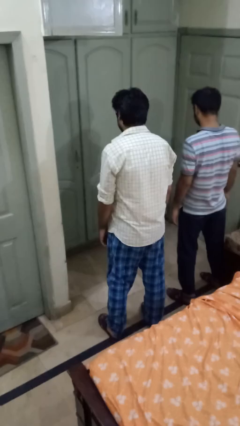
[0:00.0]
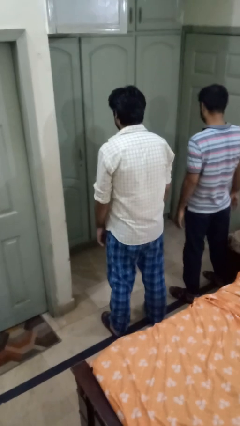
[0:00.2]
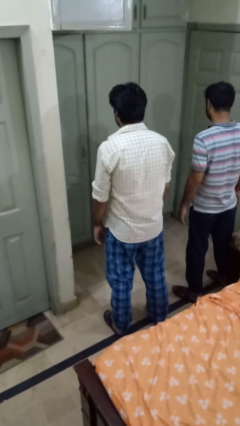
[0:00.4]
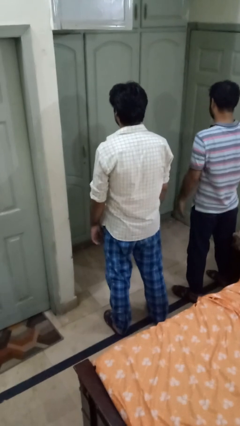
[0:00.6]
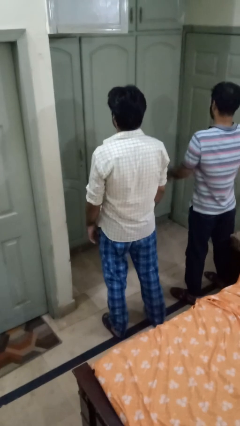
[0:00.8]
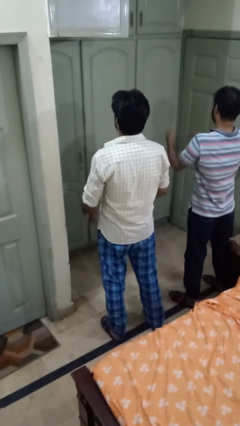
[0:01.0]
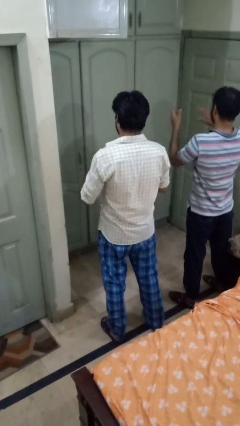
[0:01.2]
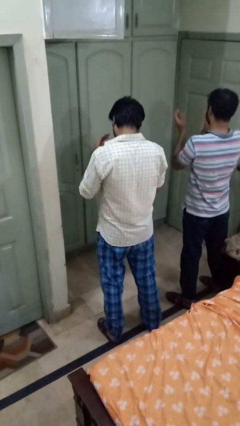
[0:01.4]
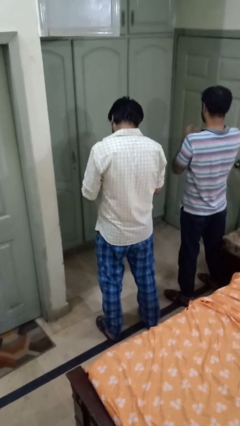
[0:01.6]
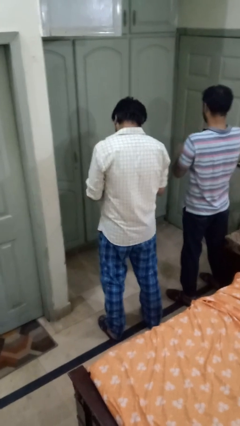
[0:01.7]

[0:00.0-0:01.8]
person laughs with person

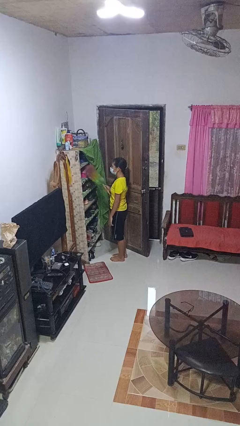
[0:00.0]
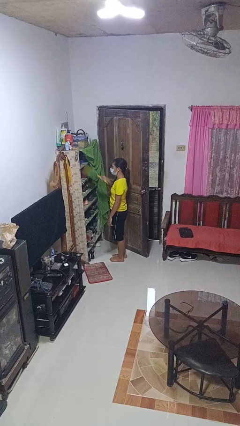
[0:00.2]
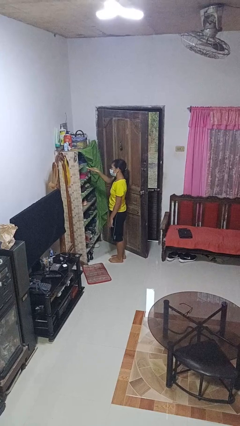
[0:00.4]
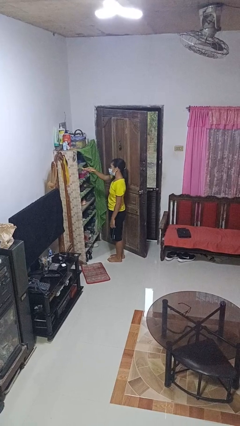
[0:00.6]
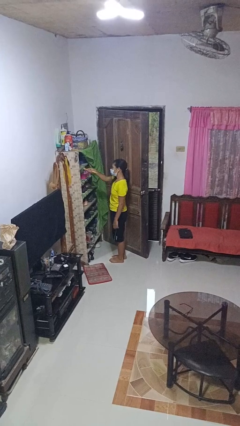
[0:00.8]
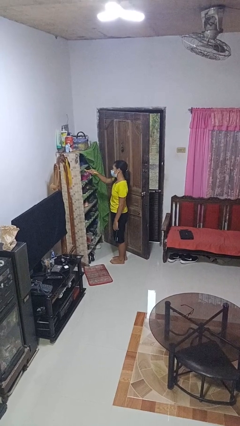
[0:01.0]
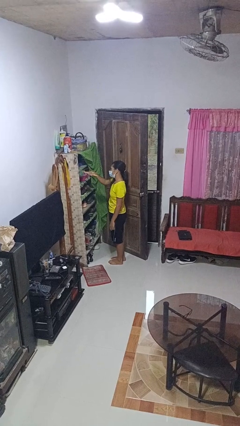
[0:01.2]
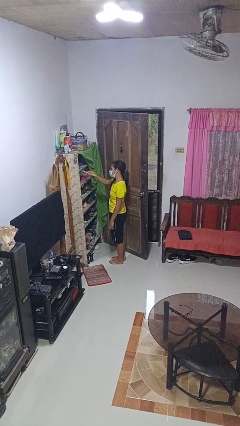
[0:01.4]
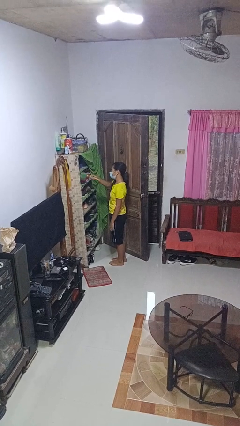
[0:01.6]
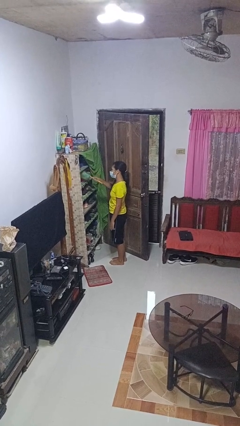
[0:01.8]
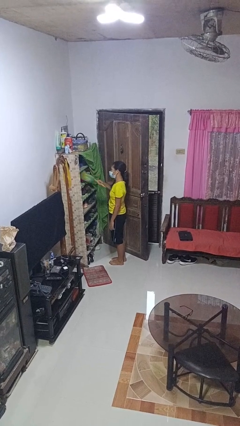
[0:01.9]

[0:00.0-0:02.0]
person dusts furniture

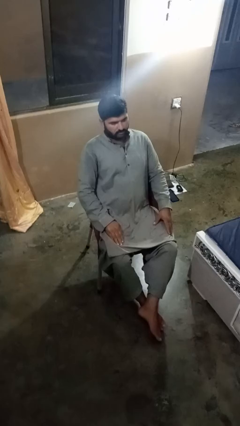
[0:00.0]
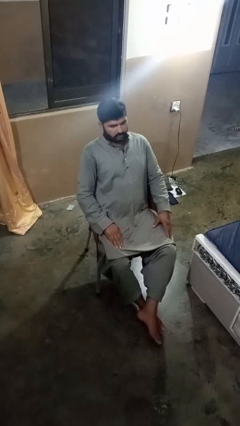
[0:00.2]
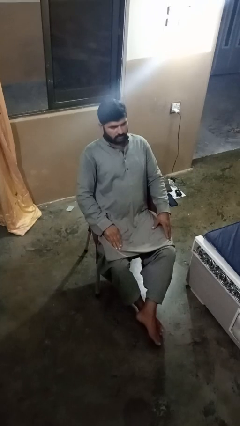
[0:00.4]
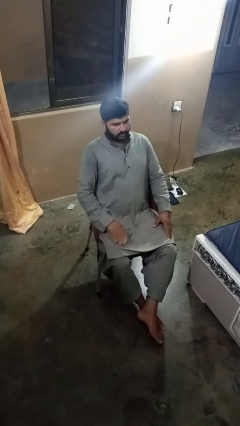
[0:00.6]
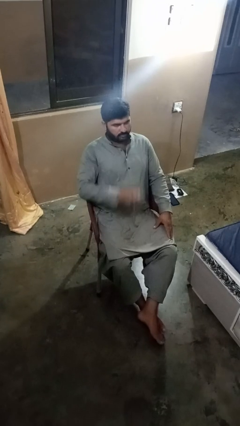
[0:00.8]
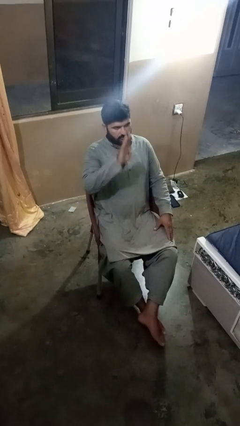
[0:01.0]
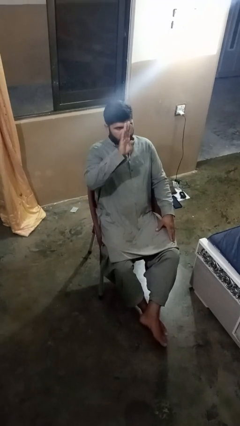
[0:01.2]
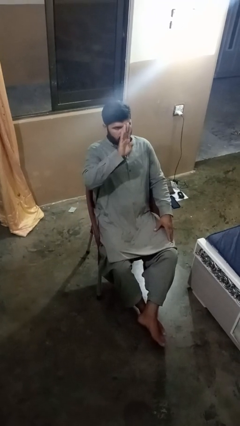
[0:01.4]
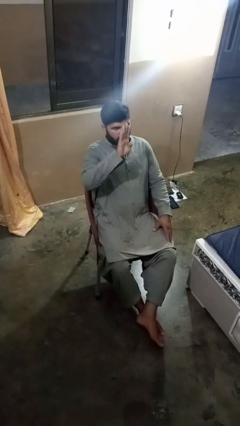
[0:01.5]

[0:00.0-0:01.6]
person gestures number four

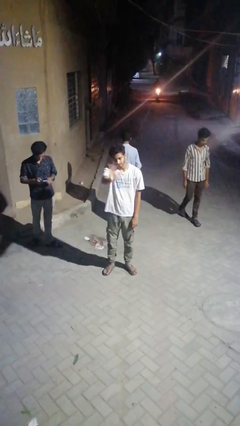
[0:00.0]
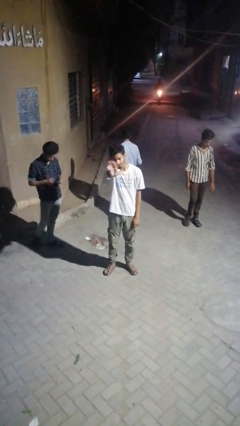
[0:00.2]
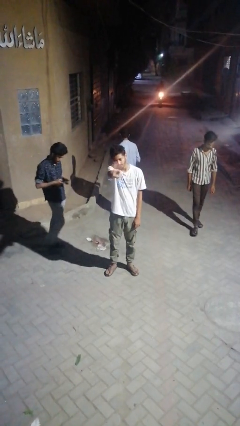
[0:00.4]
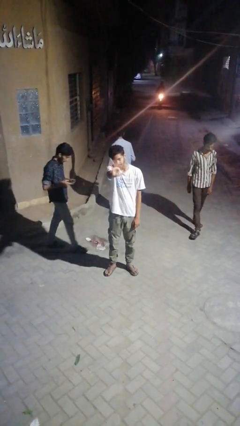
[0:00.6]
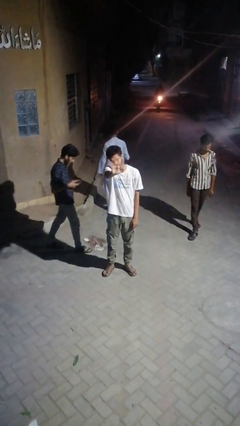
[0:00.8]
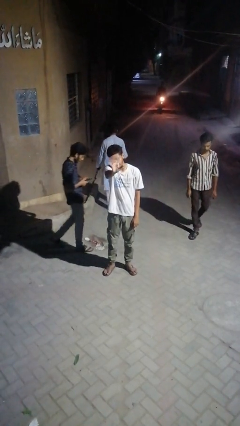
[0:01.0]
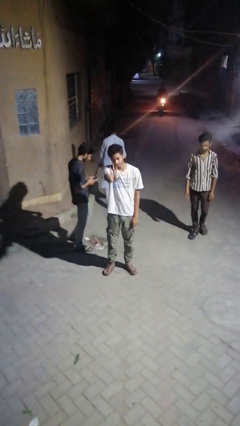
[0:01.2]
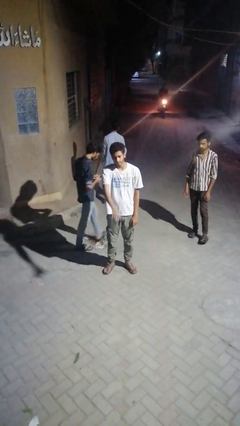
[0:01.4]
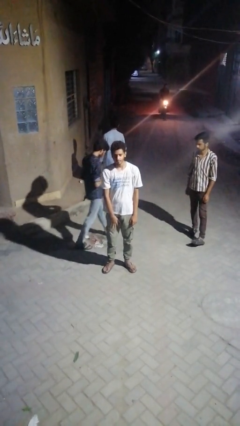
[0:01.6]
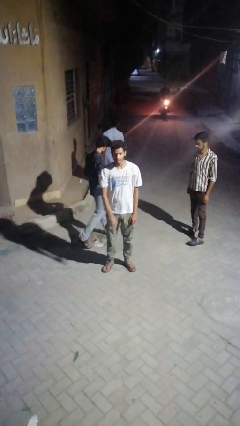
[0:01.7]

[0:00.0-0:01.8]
person waves at person

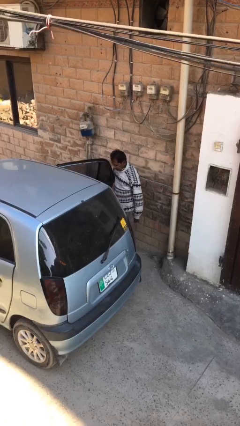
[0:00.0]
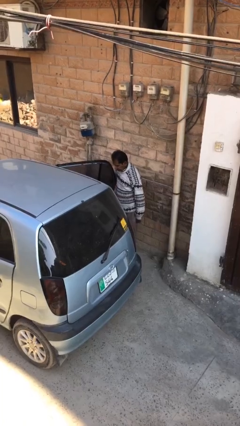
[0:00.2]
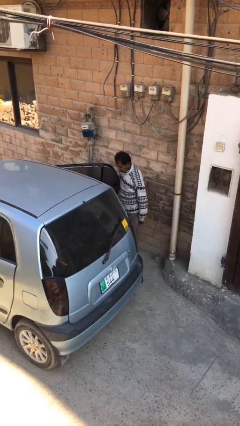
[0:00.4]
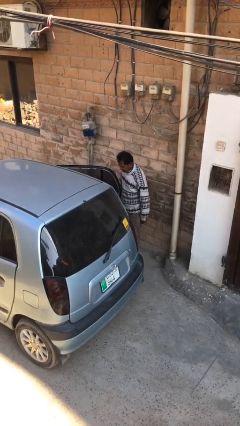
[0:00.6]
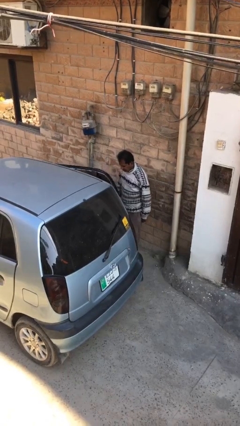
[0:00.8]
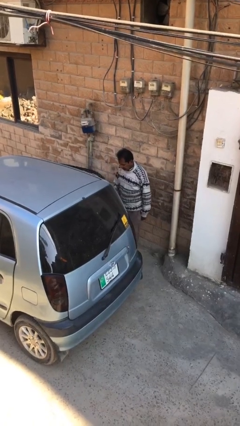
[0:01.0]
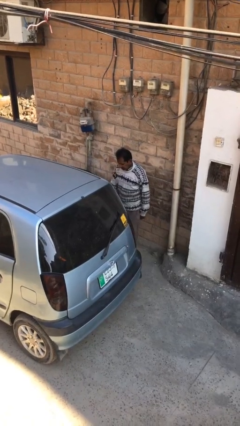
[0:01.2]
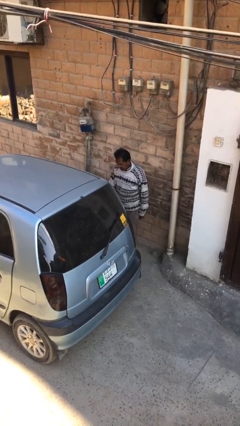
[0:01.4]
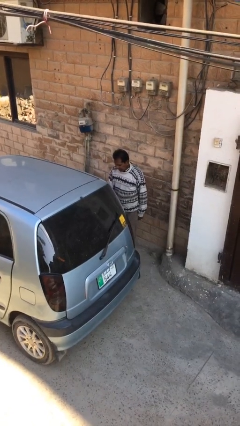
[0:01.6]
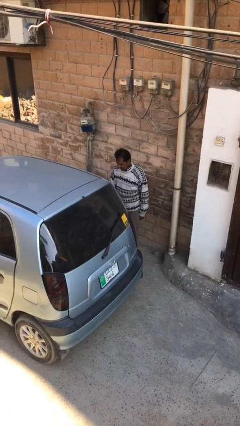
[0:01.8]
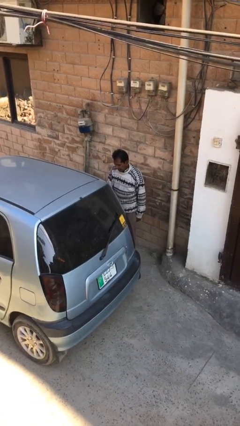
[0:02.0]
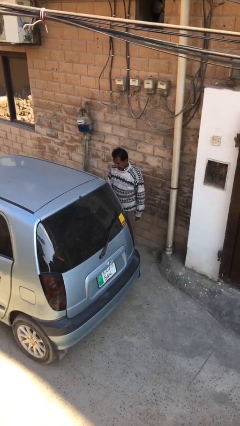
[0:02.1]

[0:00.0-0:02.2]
person closes car door

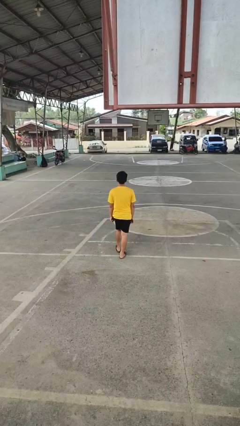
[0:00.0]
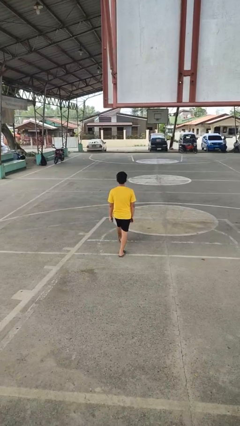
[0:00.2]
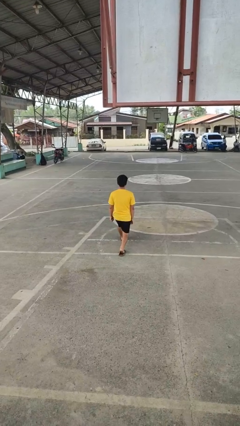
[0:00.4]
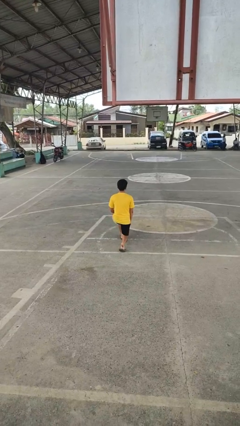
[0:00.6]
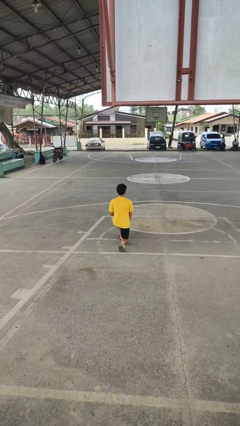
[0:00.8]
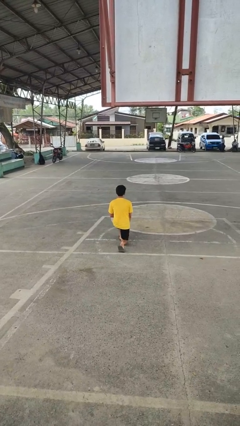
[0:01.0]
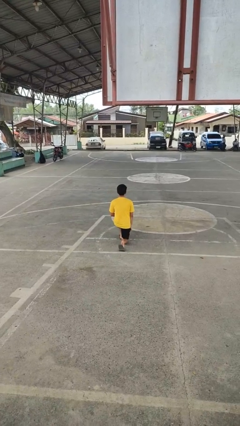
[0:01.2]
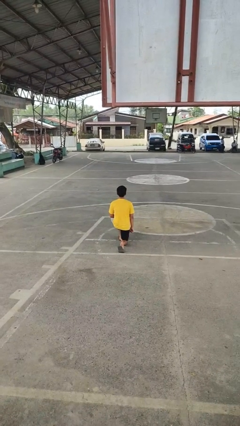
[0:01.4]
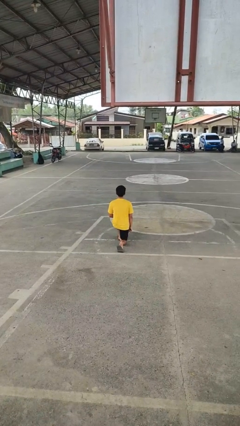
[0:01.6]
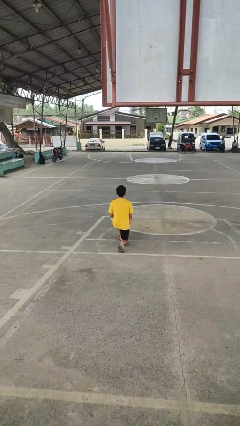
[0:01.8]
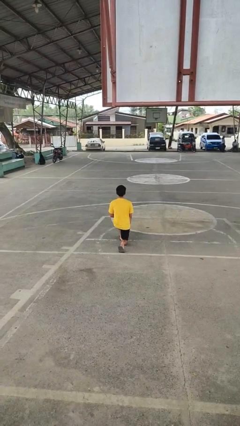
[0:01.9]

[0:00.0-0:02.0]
person kneels

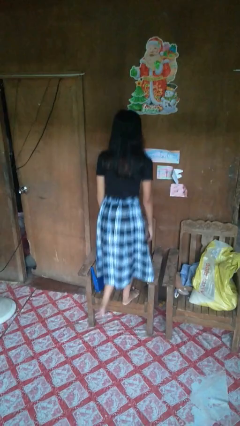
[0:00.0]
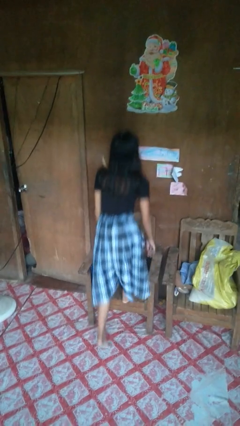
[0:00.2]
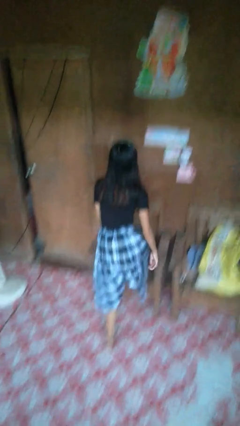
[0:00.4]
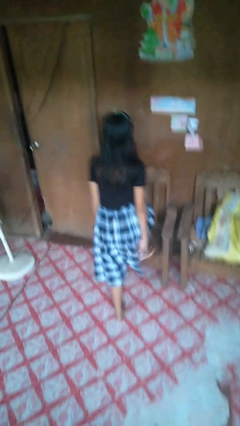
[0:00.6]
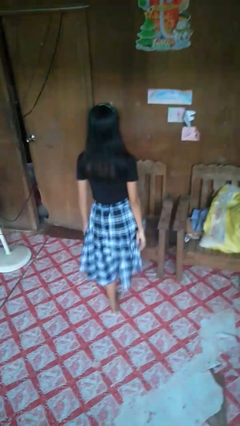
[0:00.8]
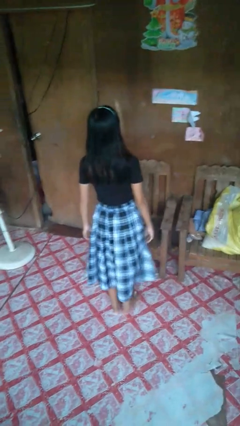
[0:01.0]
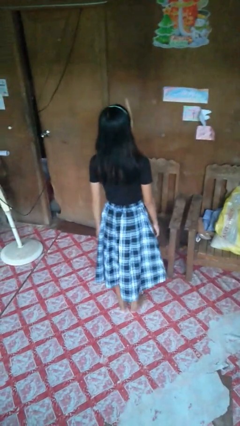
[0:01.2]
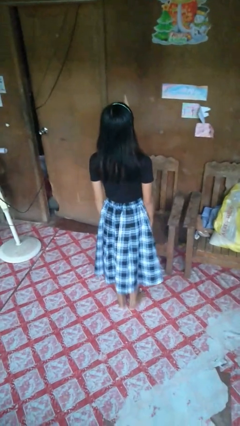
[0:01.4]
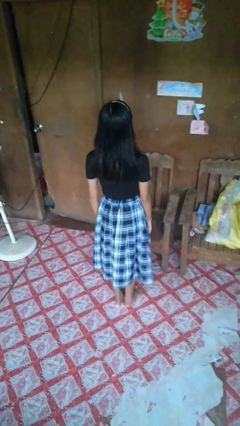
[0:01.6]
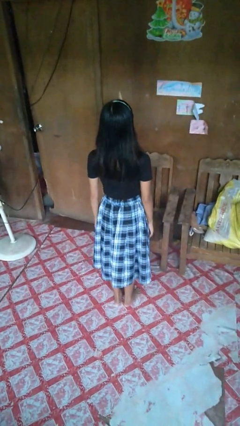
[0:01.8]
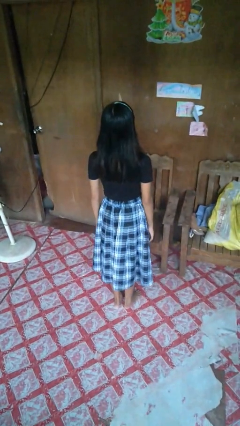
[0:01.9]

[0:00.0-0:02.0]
person climbs off chair

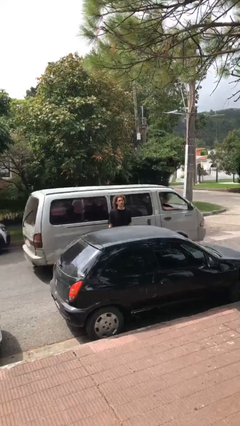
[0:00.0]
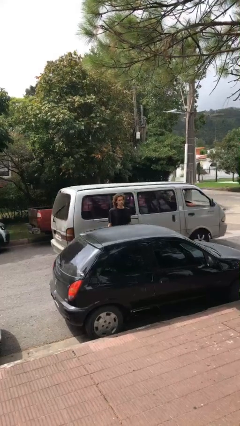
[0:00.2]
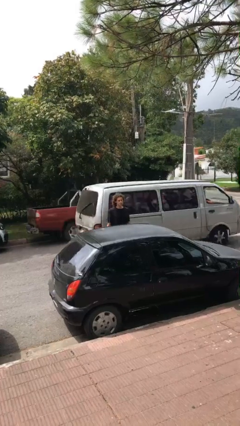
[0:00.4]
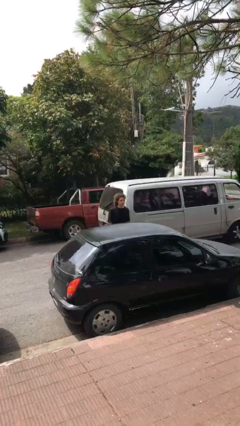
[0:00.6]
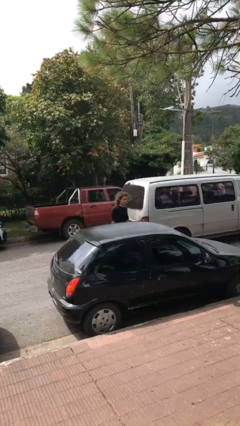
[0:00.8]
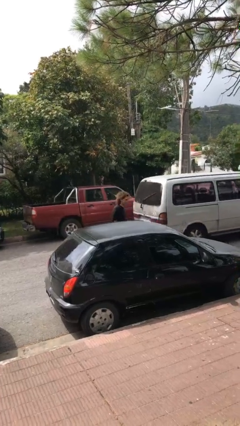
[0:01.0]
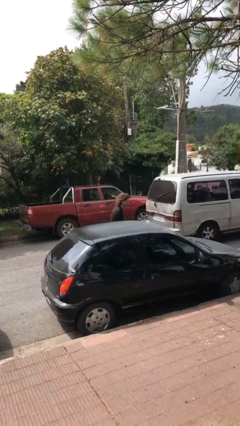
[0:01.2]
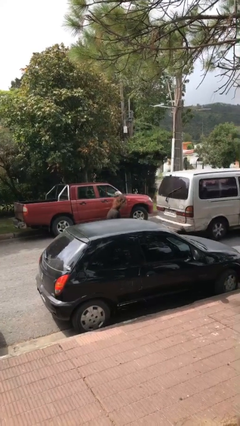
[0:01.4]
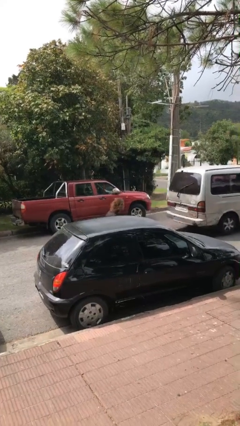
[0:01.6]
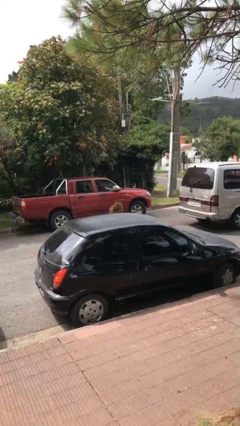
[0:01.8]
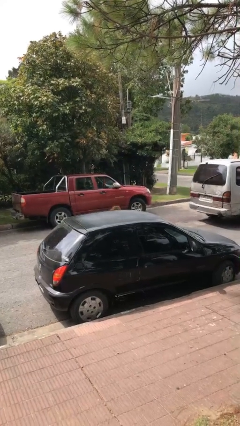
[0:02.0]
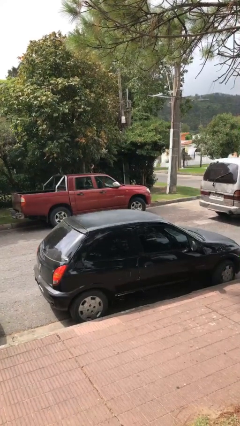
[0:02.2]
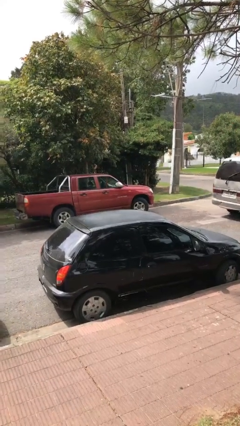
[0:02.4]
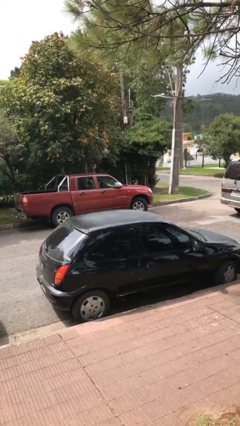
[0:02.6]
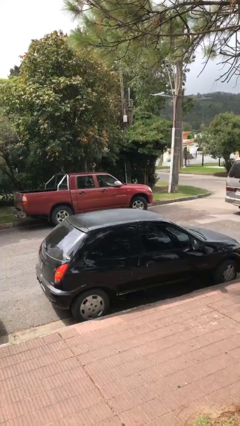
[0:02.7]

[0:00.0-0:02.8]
person enters car

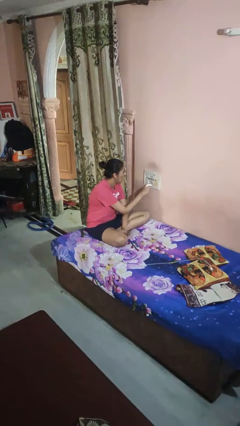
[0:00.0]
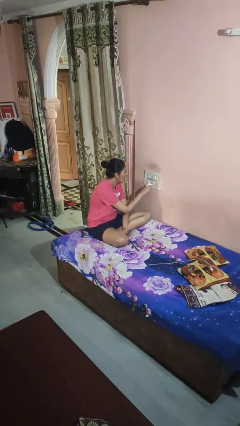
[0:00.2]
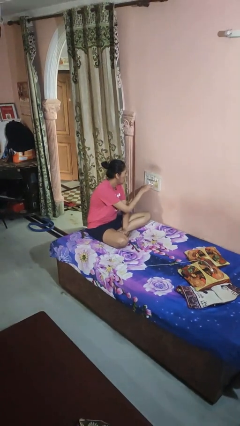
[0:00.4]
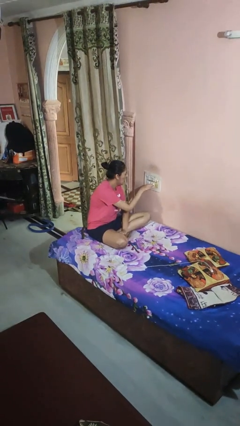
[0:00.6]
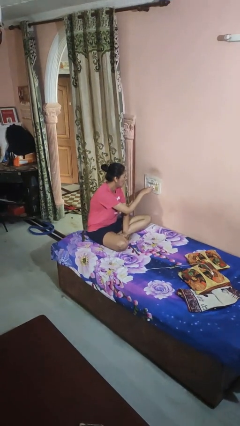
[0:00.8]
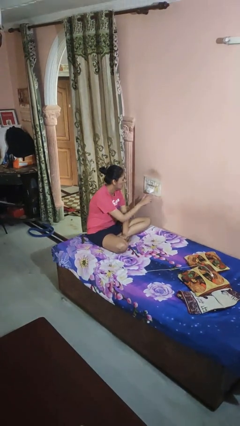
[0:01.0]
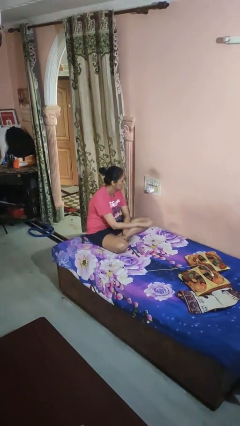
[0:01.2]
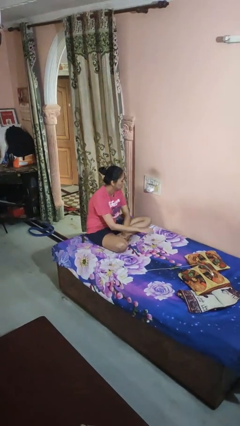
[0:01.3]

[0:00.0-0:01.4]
person plugs into electrical socket
